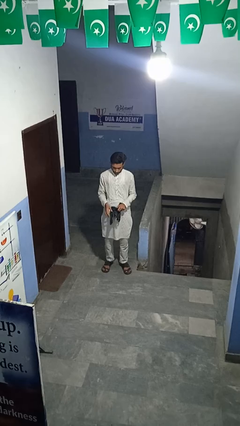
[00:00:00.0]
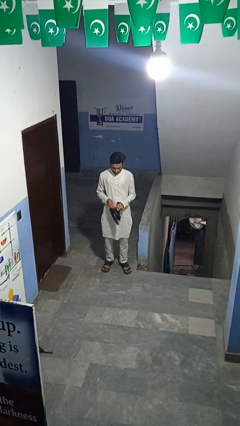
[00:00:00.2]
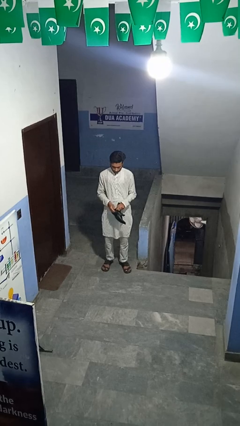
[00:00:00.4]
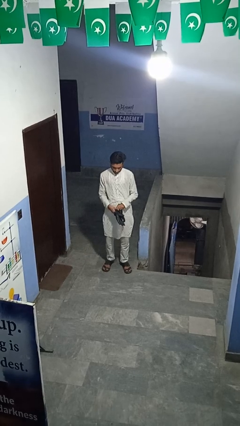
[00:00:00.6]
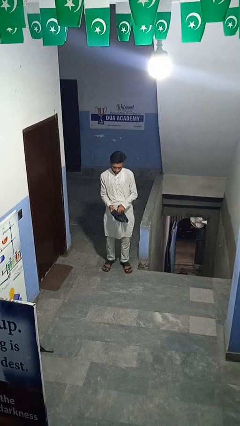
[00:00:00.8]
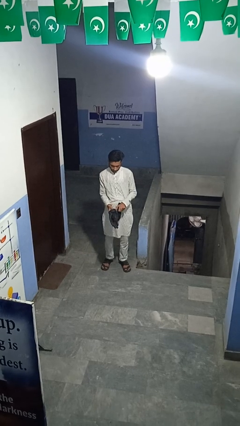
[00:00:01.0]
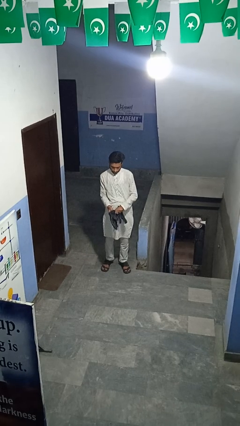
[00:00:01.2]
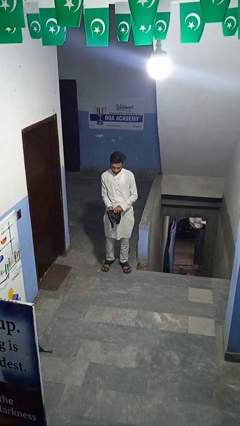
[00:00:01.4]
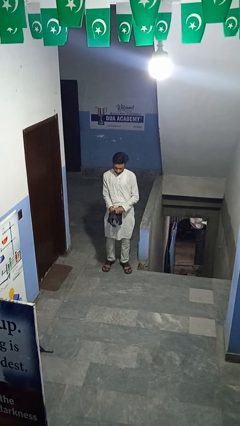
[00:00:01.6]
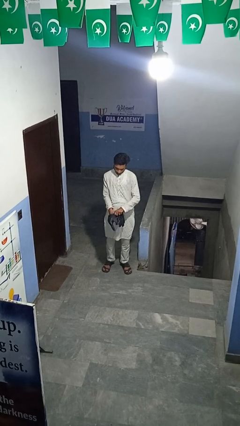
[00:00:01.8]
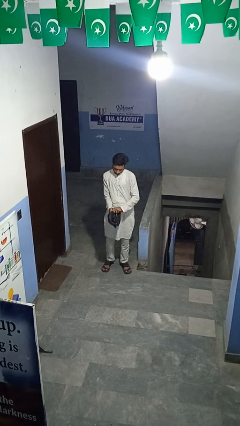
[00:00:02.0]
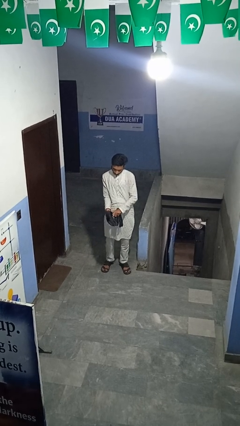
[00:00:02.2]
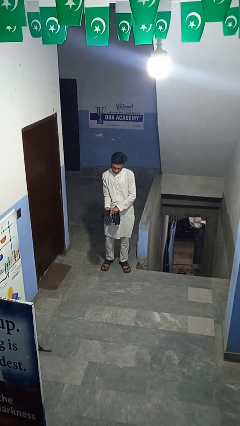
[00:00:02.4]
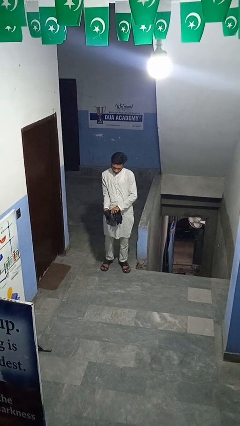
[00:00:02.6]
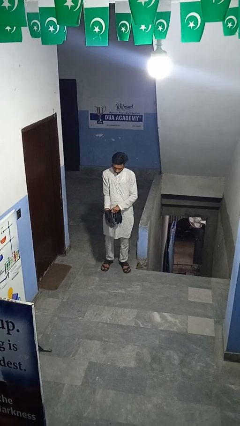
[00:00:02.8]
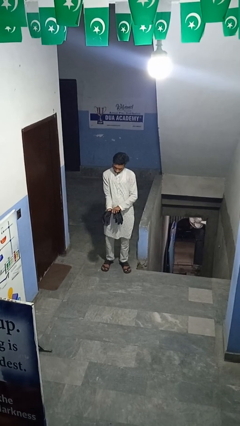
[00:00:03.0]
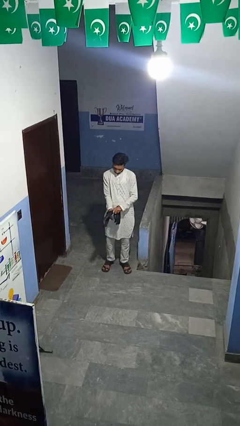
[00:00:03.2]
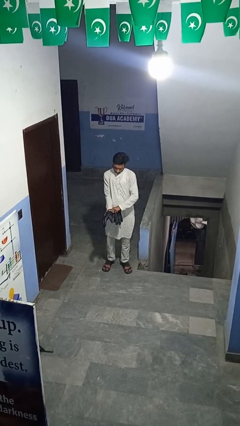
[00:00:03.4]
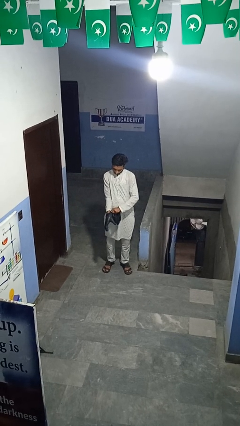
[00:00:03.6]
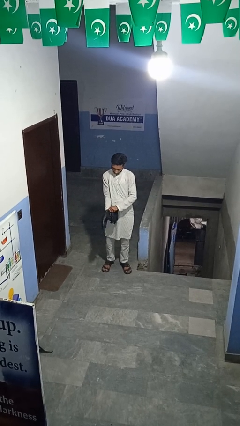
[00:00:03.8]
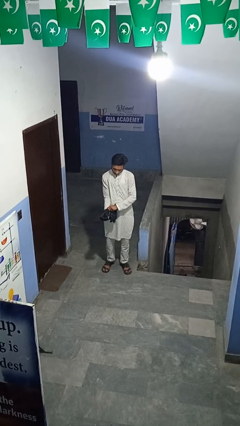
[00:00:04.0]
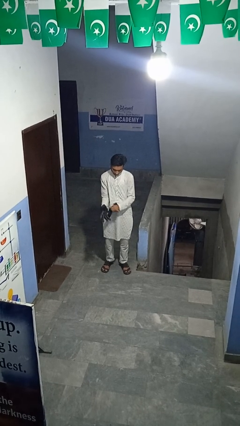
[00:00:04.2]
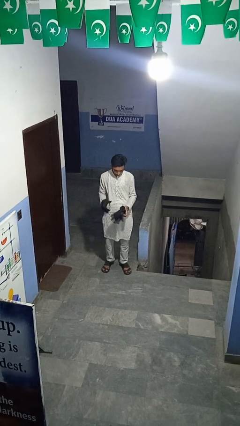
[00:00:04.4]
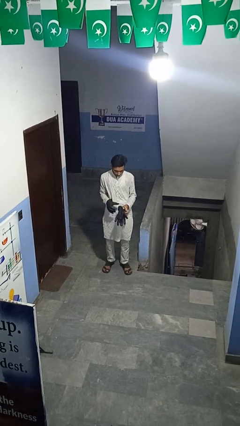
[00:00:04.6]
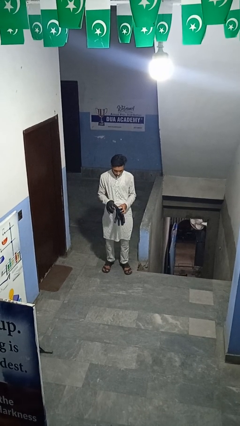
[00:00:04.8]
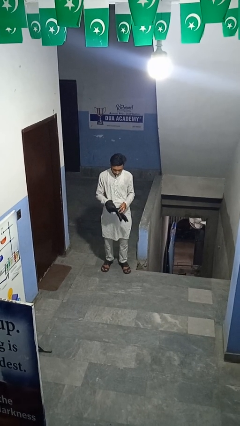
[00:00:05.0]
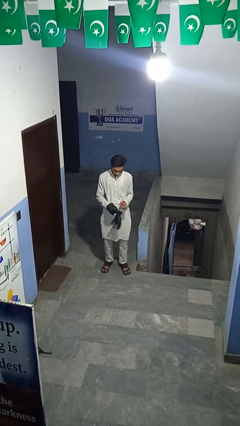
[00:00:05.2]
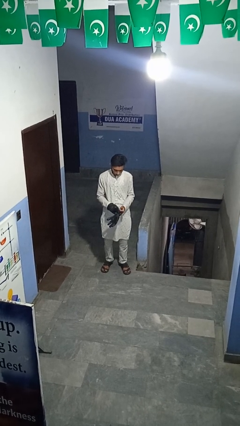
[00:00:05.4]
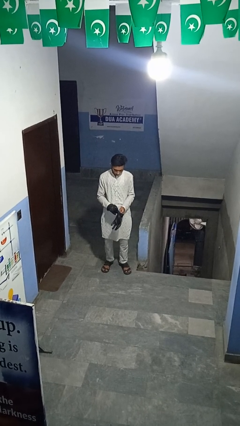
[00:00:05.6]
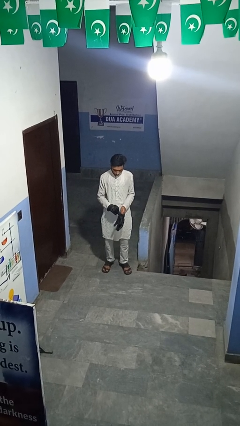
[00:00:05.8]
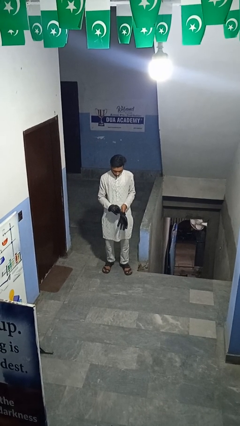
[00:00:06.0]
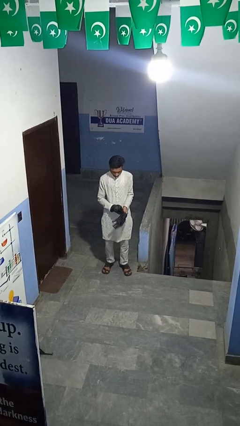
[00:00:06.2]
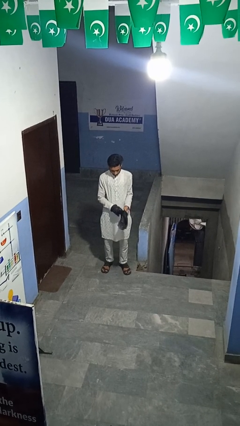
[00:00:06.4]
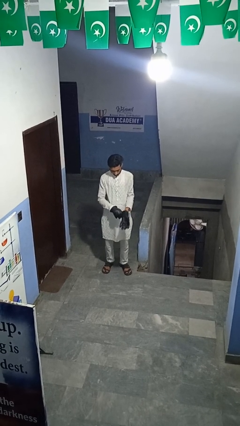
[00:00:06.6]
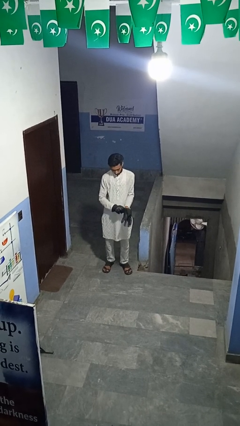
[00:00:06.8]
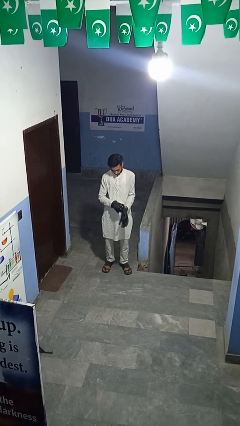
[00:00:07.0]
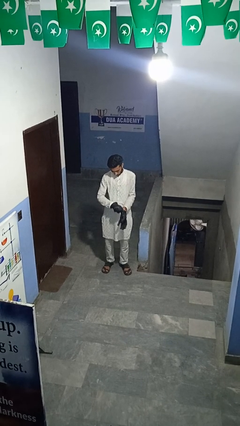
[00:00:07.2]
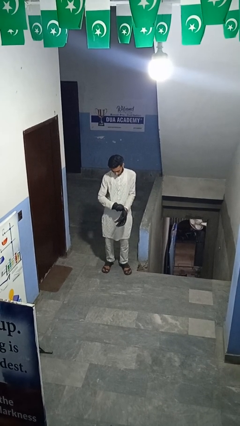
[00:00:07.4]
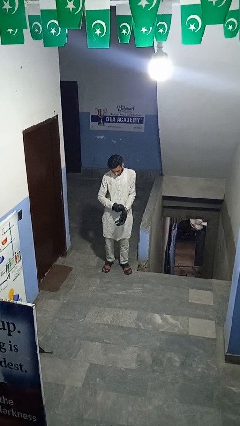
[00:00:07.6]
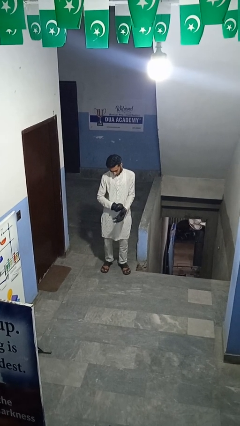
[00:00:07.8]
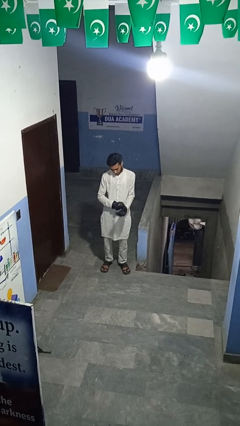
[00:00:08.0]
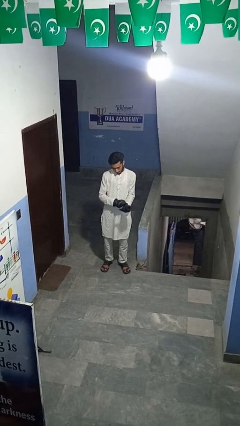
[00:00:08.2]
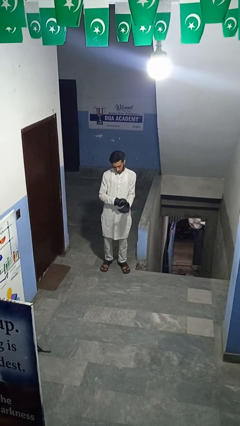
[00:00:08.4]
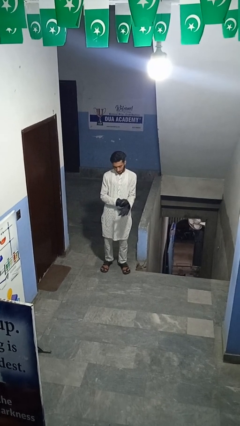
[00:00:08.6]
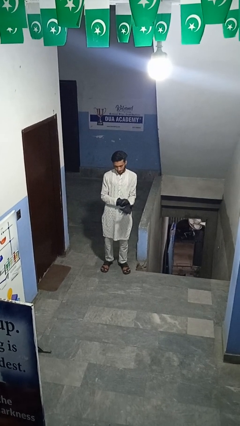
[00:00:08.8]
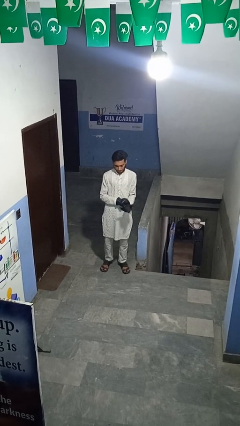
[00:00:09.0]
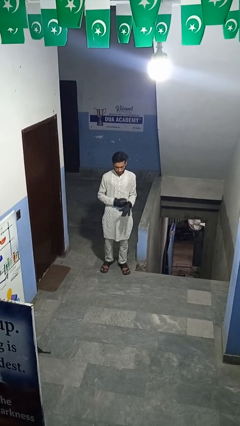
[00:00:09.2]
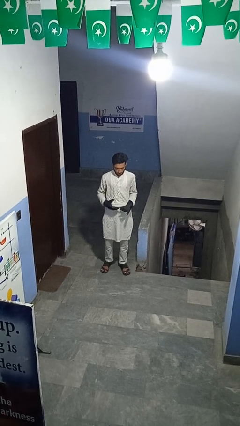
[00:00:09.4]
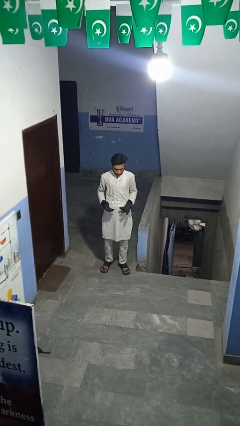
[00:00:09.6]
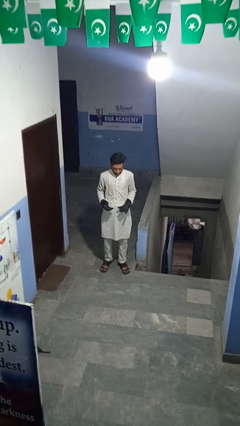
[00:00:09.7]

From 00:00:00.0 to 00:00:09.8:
person puts on gloves

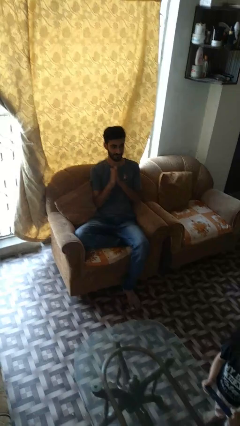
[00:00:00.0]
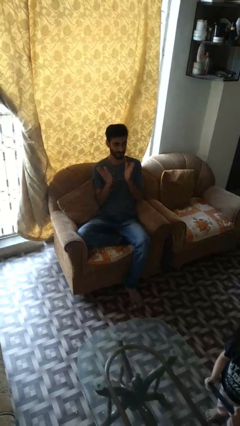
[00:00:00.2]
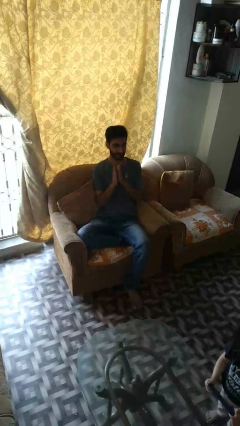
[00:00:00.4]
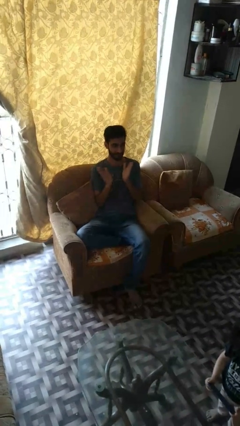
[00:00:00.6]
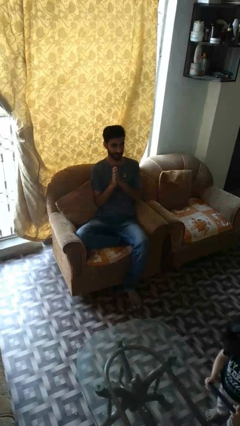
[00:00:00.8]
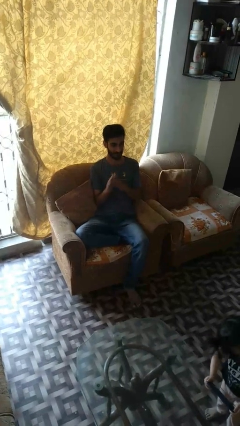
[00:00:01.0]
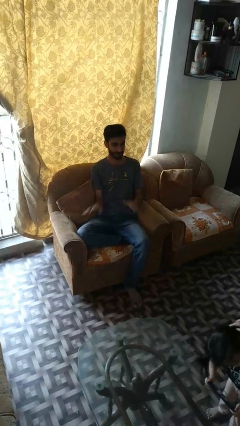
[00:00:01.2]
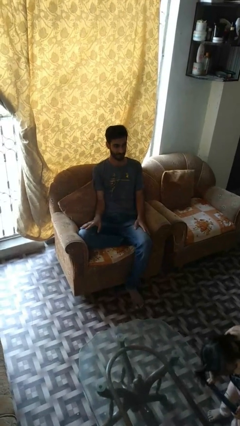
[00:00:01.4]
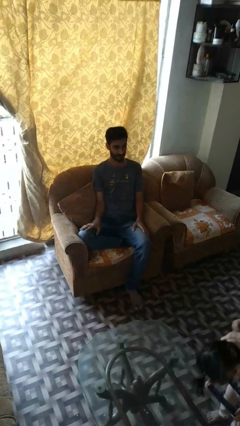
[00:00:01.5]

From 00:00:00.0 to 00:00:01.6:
person claps hands

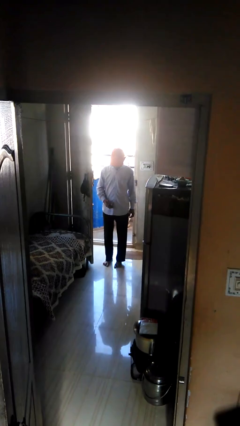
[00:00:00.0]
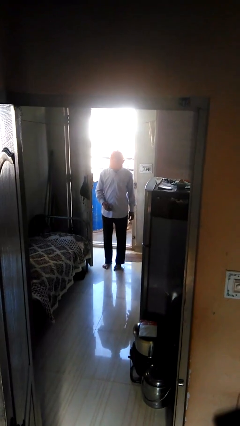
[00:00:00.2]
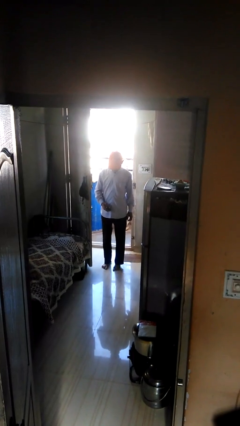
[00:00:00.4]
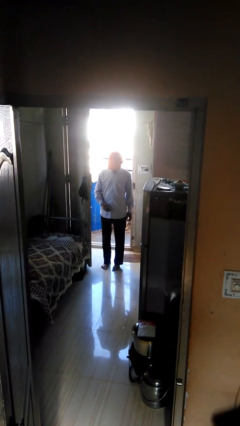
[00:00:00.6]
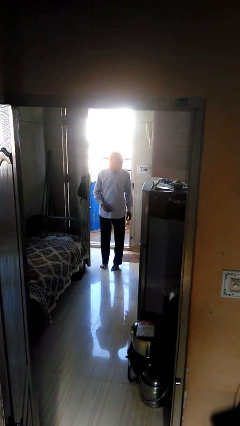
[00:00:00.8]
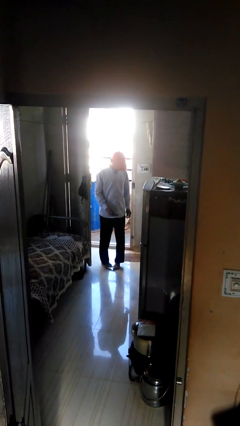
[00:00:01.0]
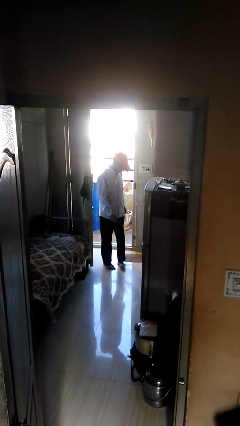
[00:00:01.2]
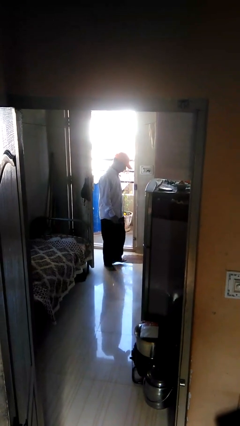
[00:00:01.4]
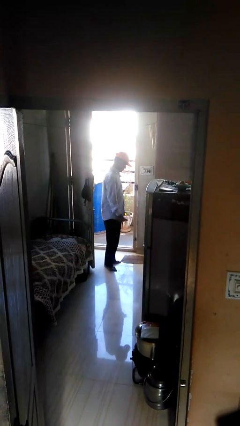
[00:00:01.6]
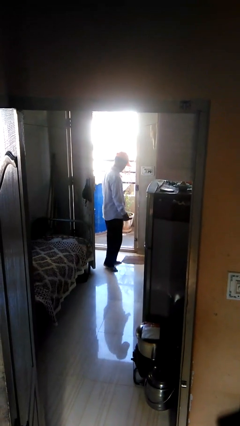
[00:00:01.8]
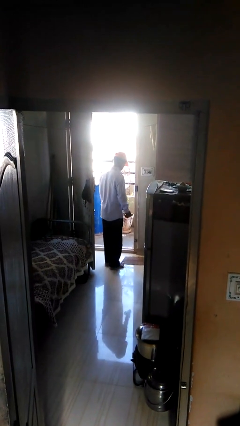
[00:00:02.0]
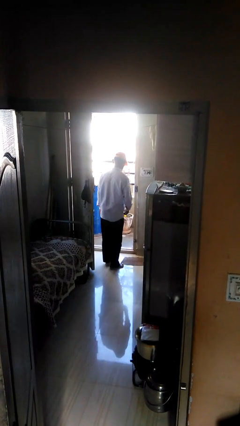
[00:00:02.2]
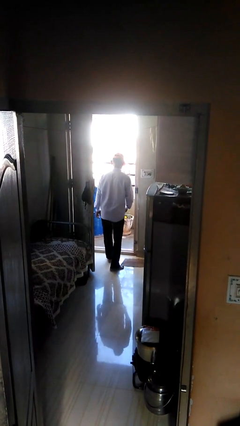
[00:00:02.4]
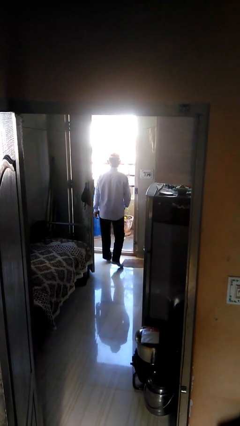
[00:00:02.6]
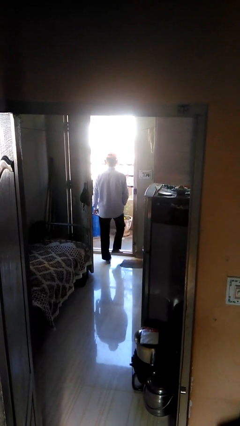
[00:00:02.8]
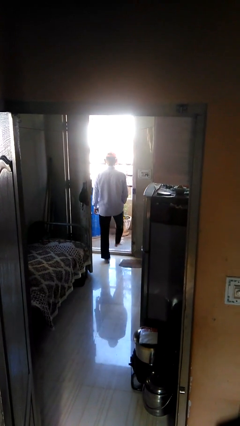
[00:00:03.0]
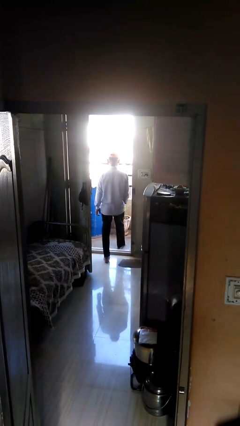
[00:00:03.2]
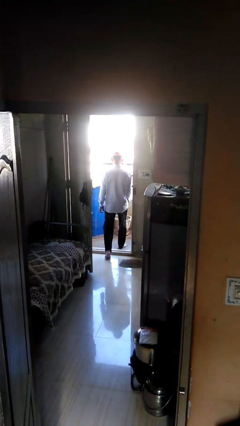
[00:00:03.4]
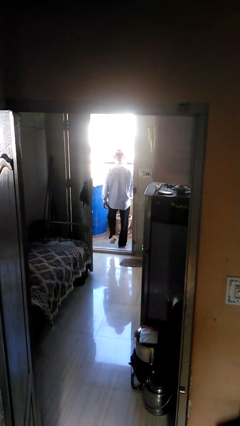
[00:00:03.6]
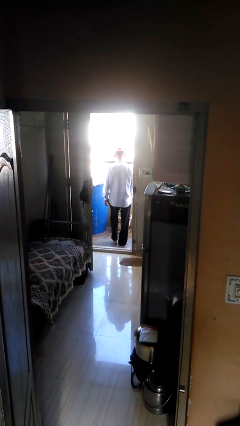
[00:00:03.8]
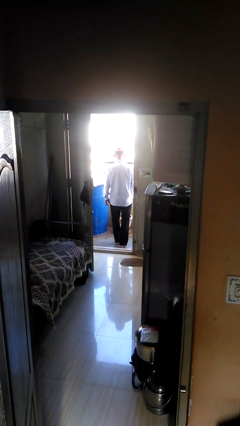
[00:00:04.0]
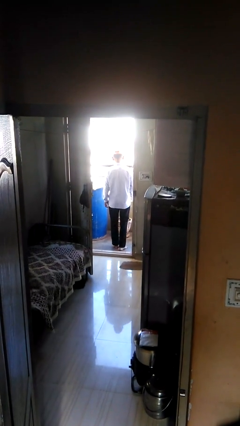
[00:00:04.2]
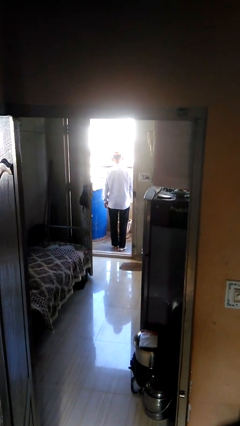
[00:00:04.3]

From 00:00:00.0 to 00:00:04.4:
person exits scene through structure

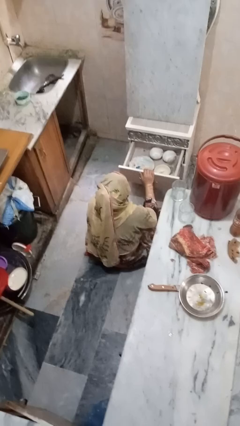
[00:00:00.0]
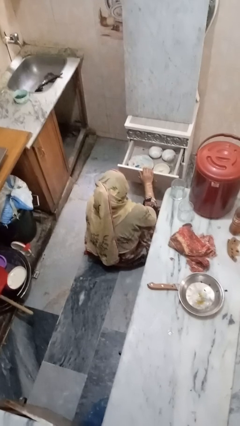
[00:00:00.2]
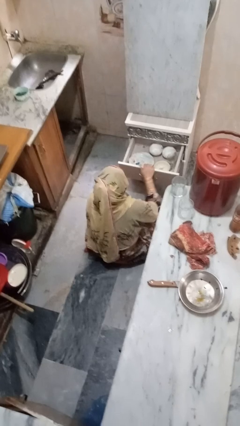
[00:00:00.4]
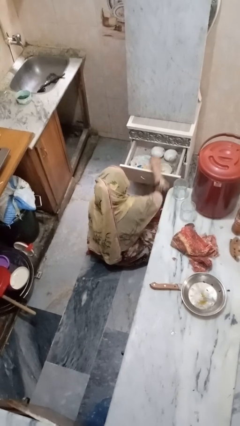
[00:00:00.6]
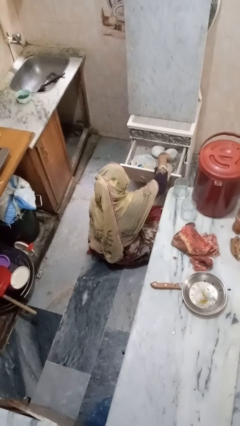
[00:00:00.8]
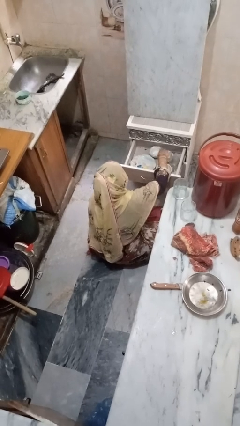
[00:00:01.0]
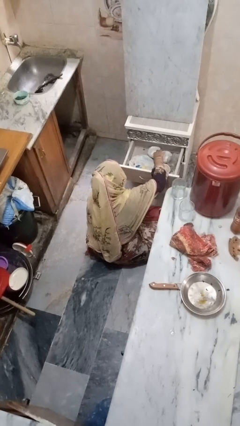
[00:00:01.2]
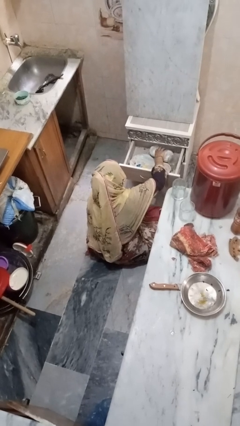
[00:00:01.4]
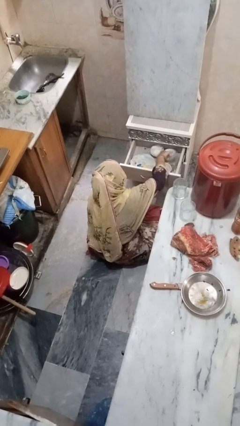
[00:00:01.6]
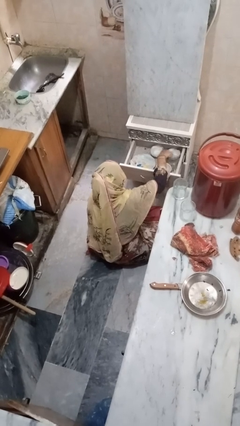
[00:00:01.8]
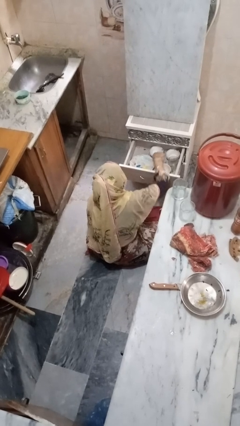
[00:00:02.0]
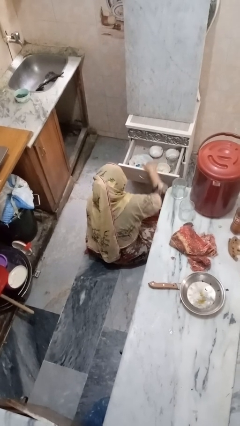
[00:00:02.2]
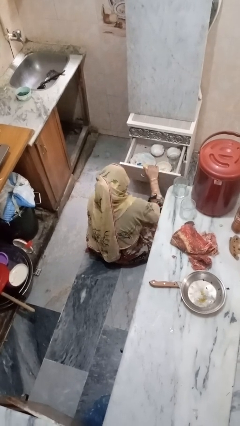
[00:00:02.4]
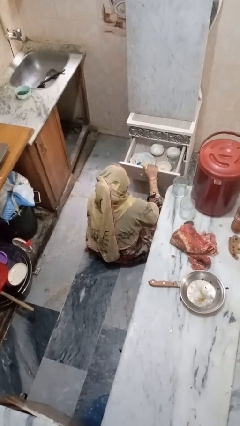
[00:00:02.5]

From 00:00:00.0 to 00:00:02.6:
person searches in kitchen drawer
